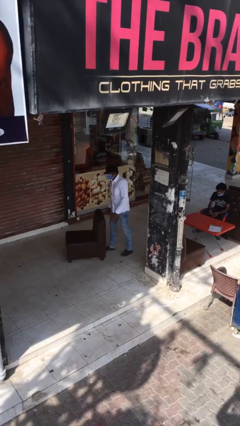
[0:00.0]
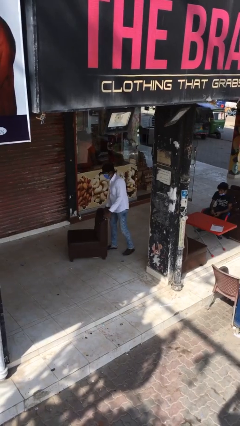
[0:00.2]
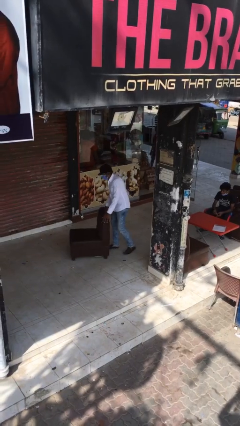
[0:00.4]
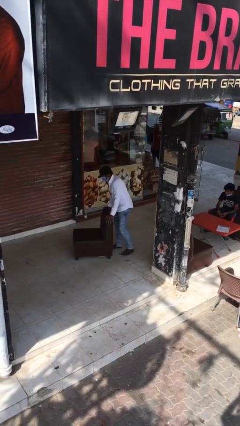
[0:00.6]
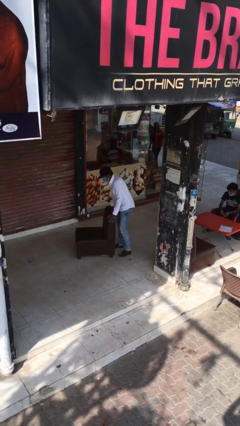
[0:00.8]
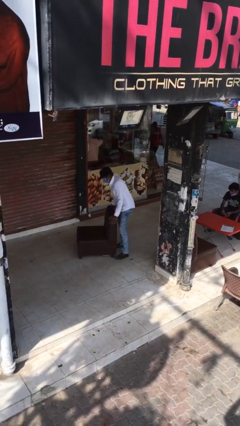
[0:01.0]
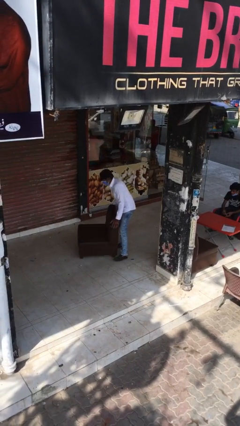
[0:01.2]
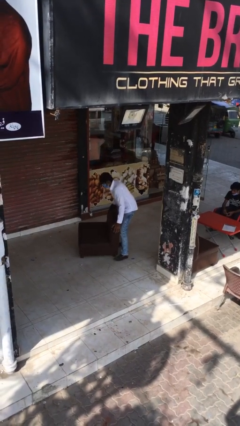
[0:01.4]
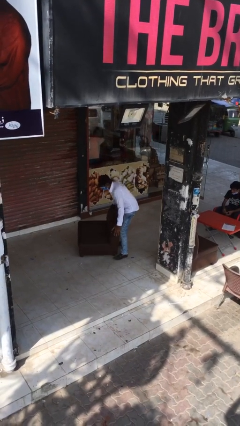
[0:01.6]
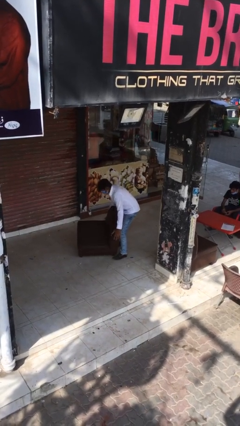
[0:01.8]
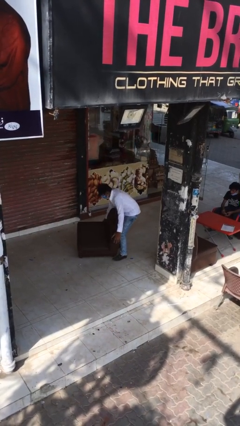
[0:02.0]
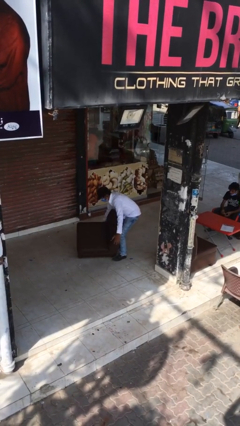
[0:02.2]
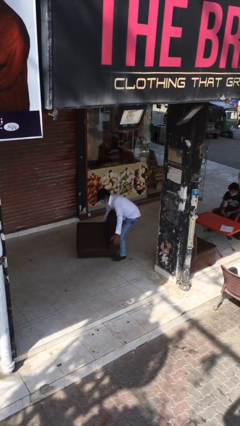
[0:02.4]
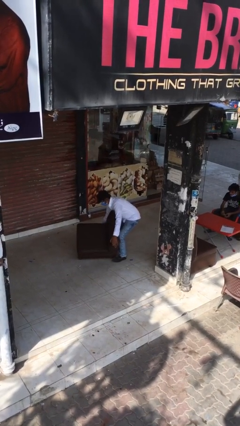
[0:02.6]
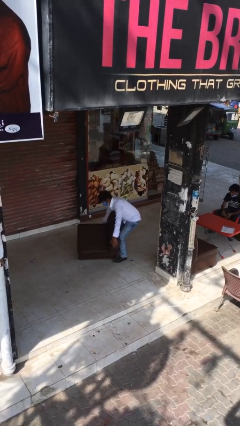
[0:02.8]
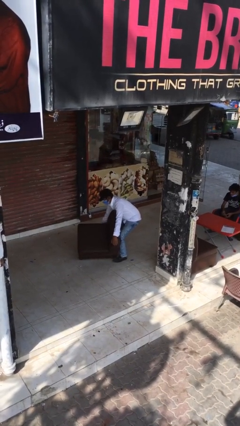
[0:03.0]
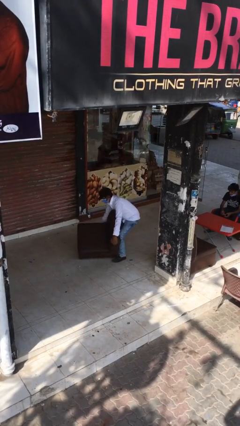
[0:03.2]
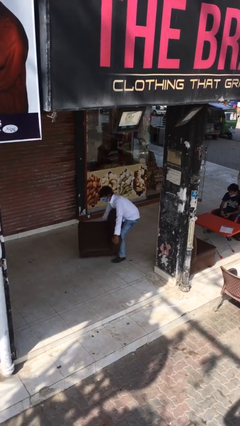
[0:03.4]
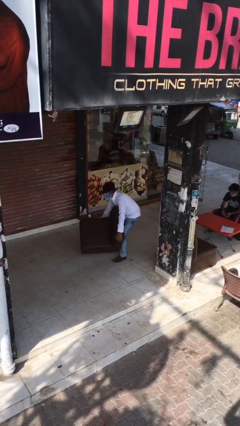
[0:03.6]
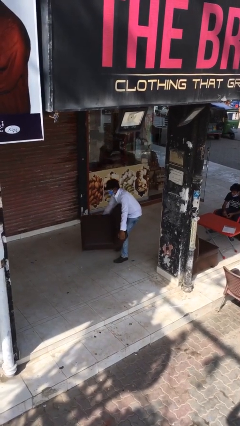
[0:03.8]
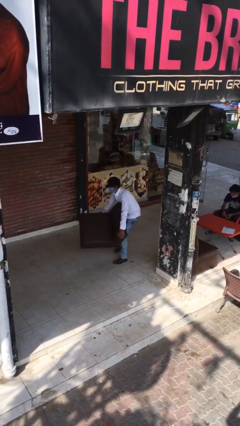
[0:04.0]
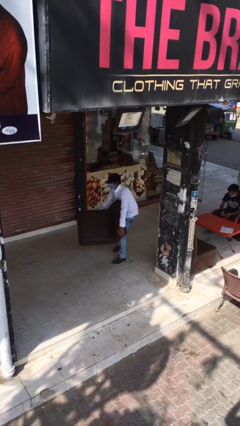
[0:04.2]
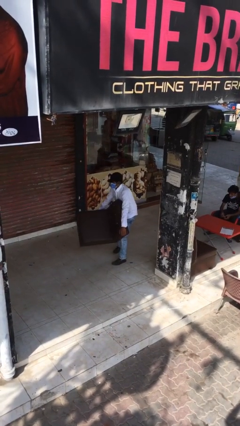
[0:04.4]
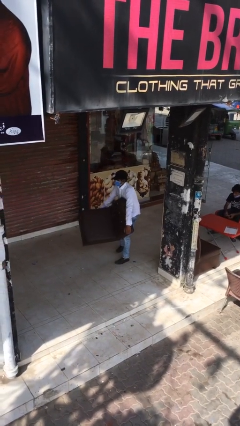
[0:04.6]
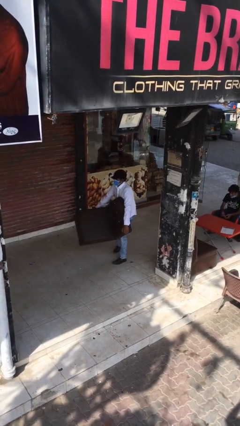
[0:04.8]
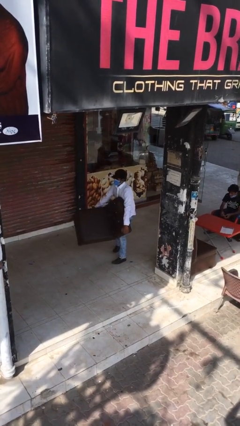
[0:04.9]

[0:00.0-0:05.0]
person picks up object from floor

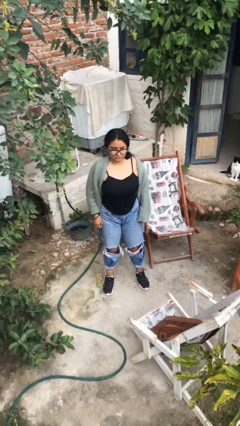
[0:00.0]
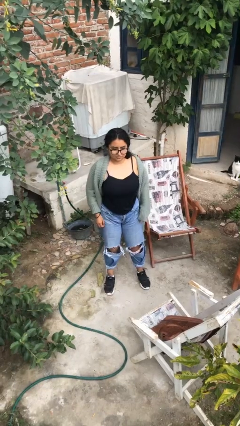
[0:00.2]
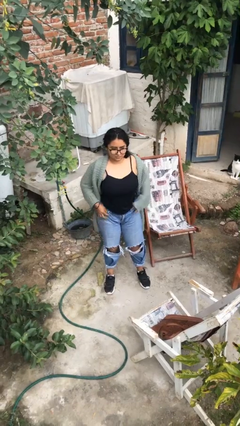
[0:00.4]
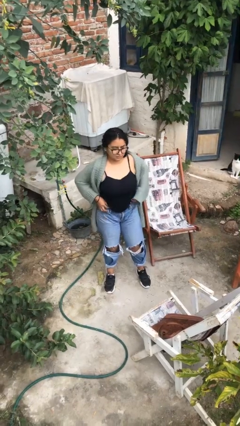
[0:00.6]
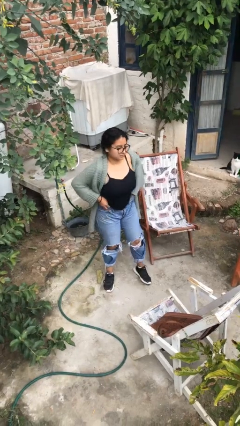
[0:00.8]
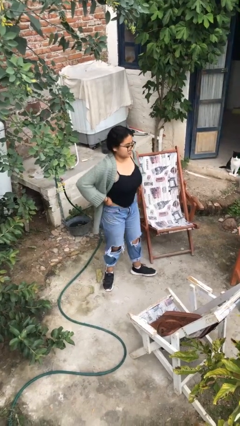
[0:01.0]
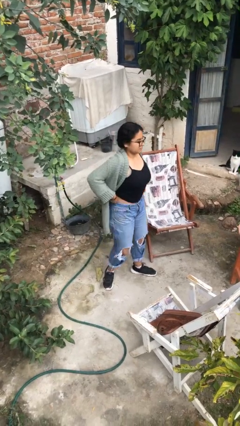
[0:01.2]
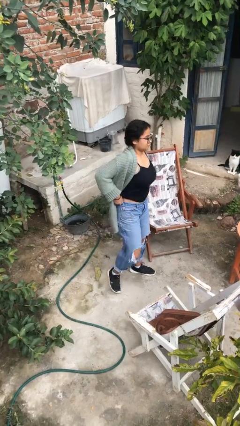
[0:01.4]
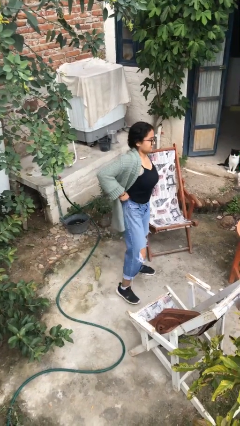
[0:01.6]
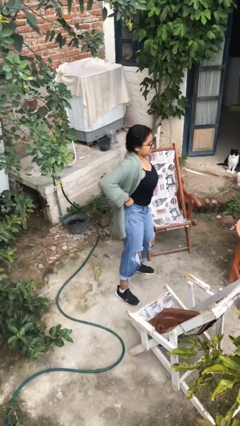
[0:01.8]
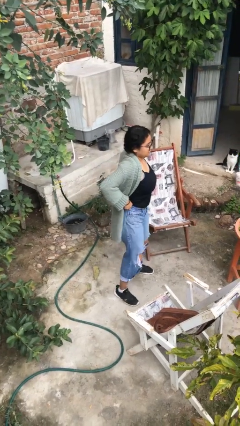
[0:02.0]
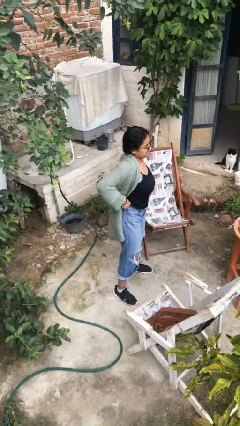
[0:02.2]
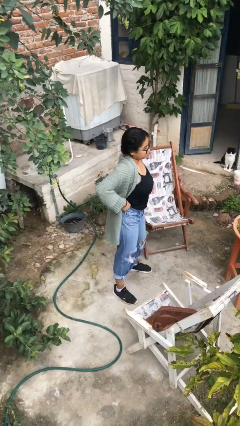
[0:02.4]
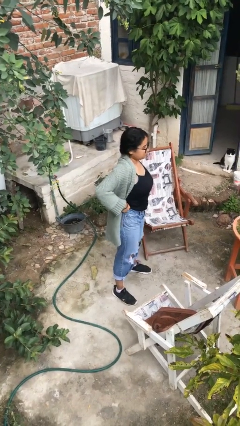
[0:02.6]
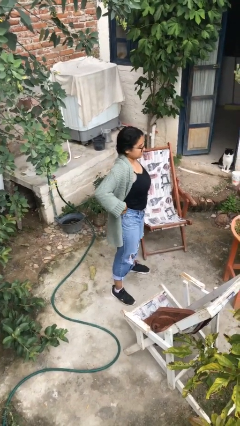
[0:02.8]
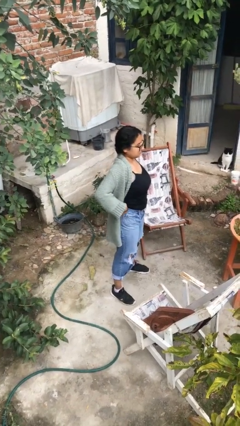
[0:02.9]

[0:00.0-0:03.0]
person hikes up pants

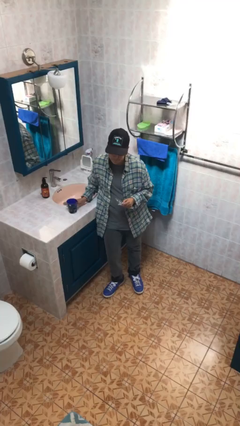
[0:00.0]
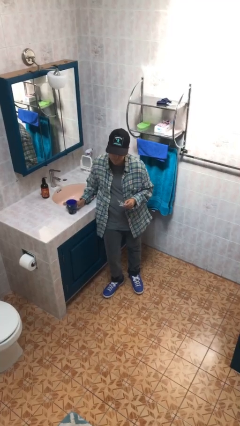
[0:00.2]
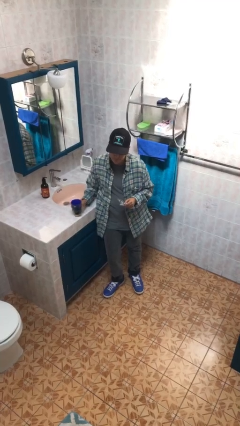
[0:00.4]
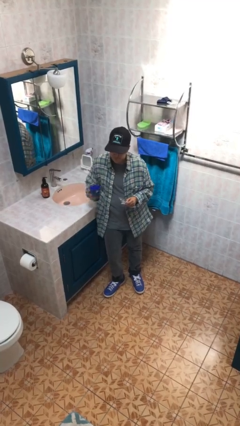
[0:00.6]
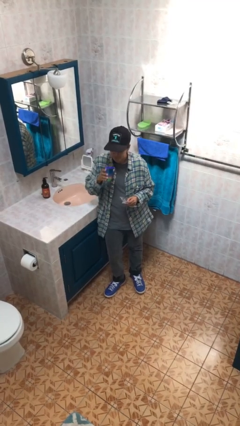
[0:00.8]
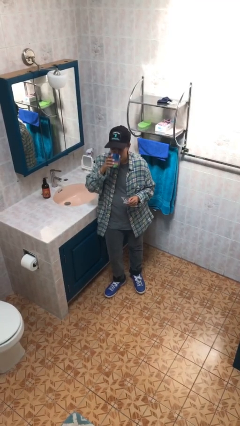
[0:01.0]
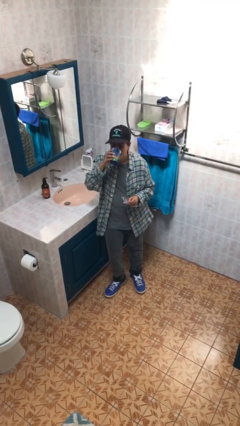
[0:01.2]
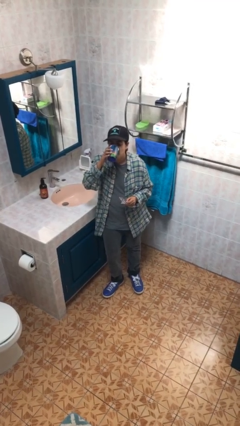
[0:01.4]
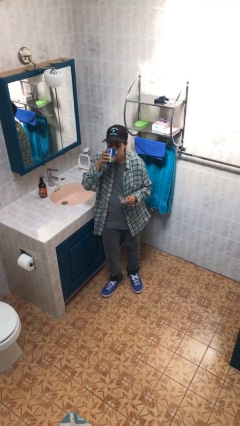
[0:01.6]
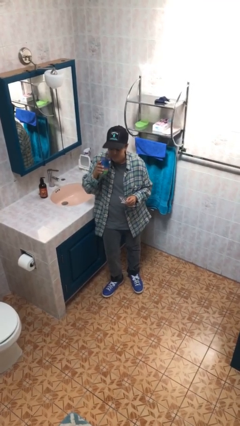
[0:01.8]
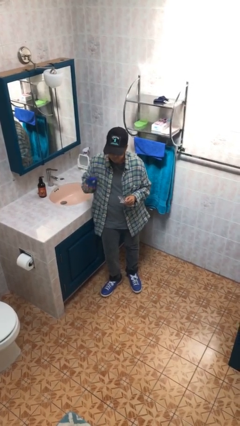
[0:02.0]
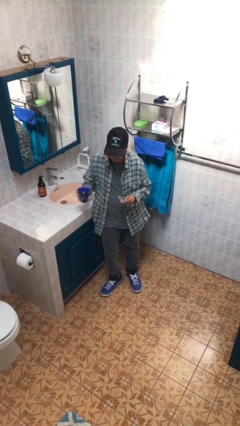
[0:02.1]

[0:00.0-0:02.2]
person drinks from cup

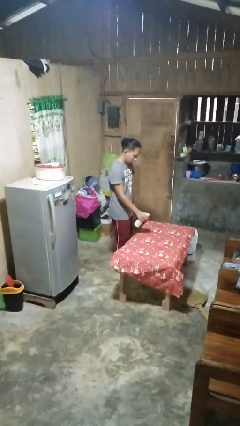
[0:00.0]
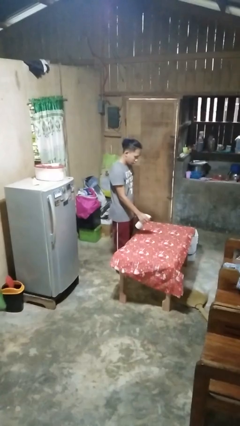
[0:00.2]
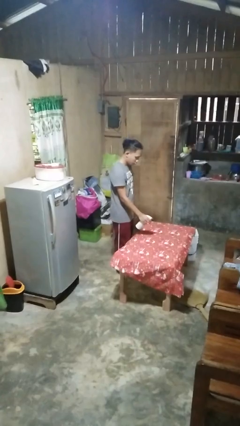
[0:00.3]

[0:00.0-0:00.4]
person sprays from bottle

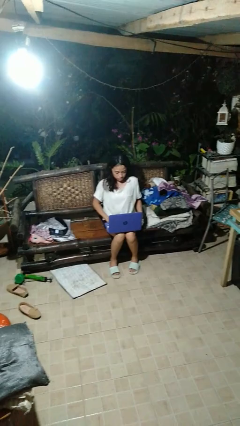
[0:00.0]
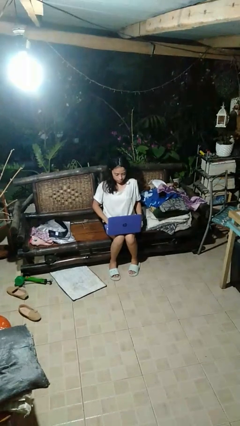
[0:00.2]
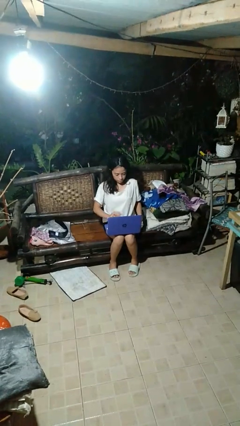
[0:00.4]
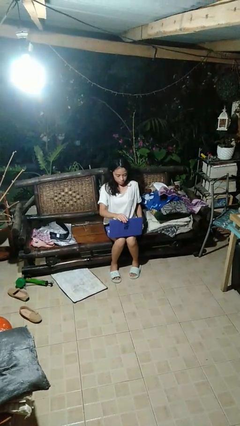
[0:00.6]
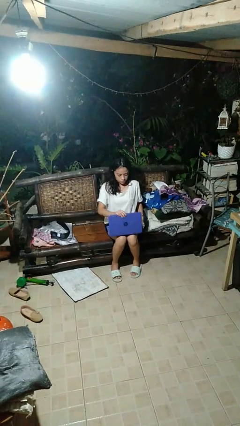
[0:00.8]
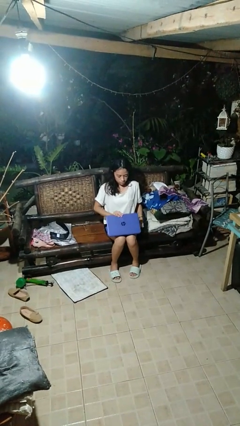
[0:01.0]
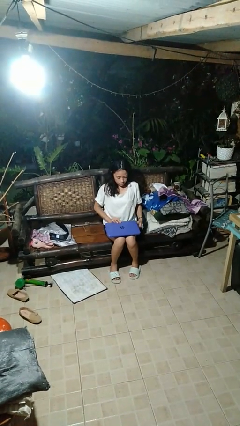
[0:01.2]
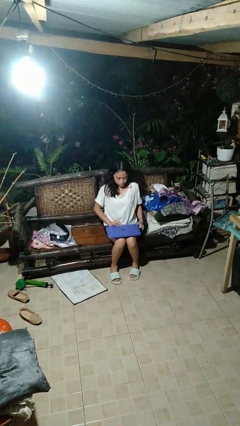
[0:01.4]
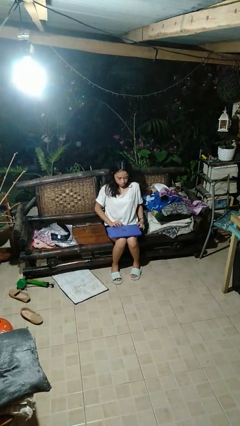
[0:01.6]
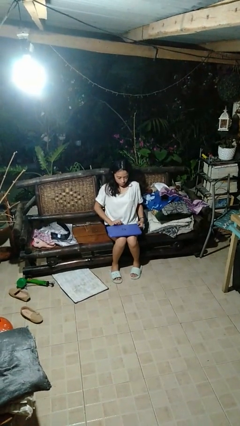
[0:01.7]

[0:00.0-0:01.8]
person closes laptop

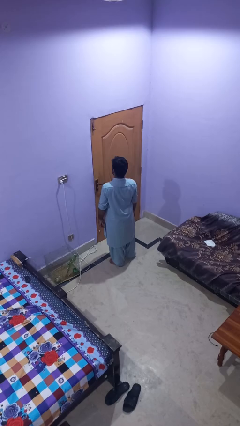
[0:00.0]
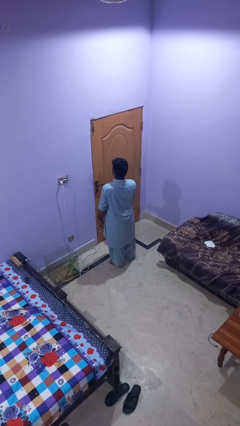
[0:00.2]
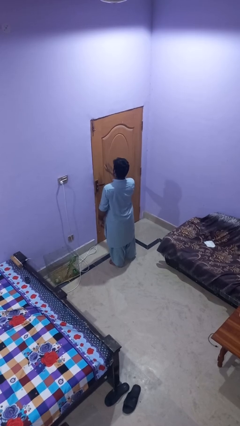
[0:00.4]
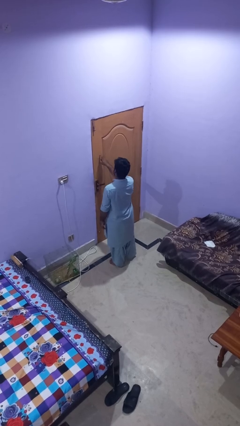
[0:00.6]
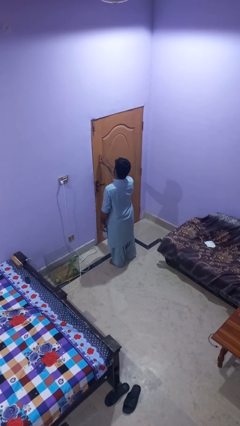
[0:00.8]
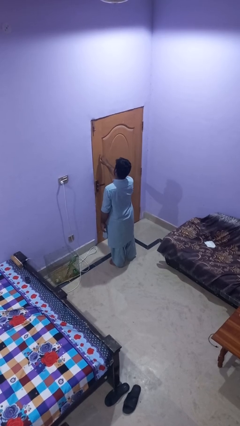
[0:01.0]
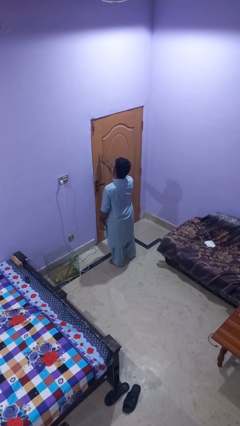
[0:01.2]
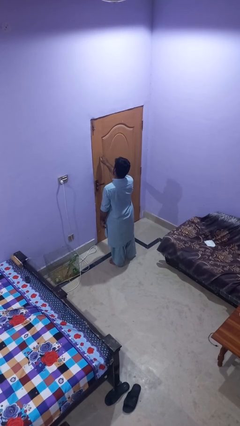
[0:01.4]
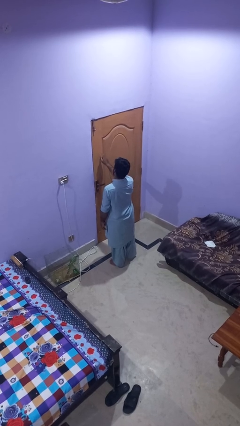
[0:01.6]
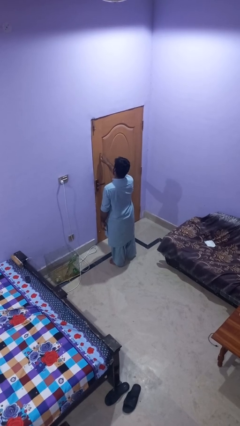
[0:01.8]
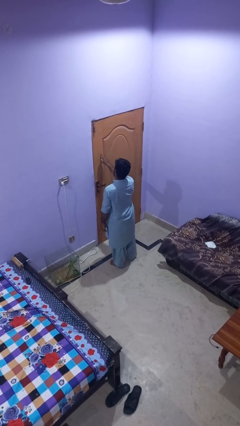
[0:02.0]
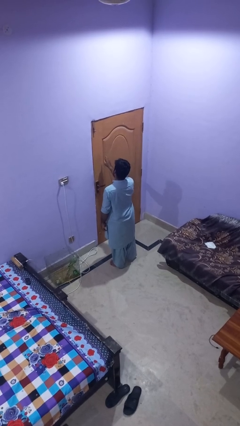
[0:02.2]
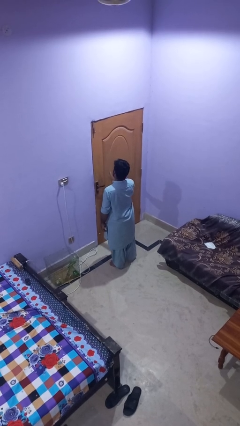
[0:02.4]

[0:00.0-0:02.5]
person taps object with finger

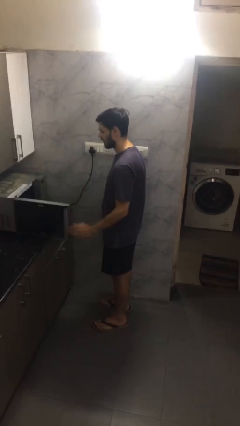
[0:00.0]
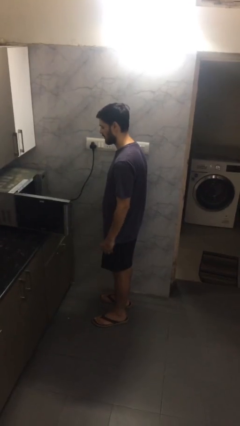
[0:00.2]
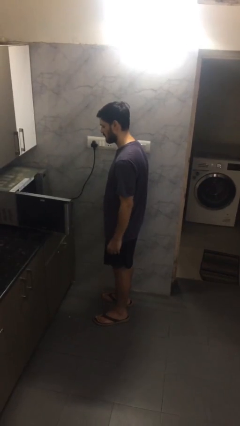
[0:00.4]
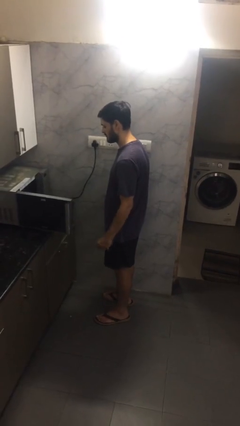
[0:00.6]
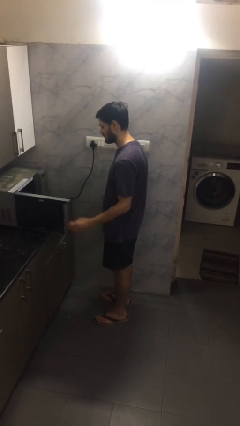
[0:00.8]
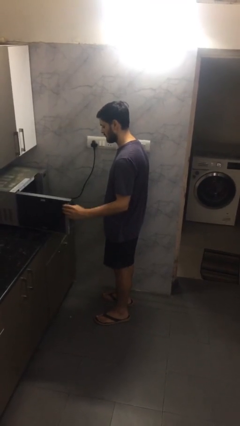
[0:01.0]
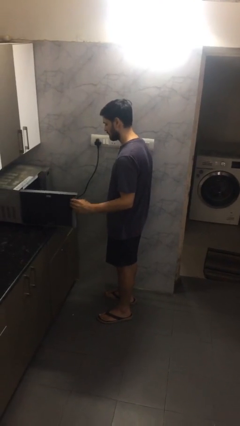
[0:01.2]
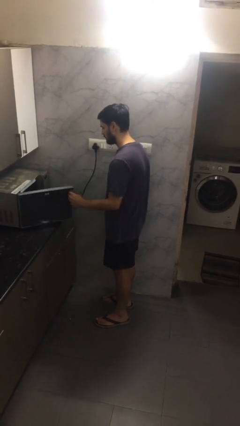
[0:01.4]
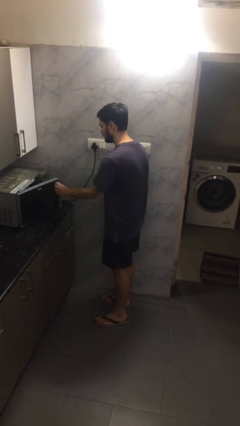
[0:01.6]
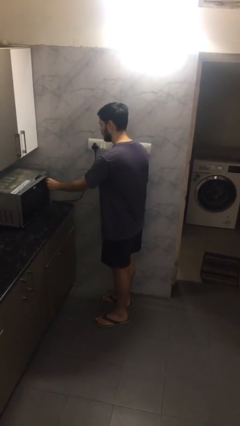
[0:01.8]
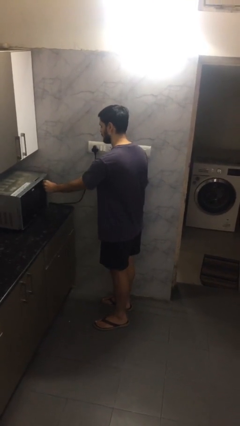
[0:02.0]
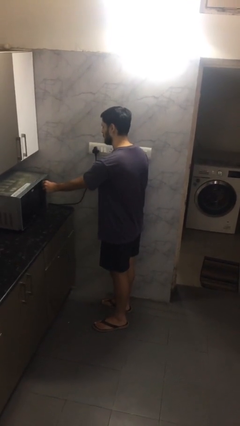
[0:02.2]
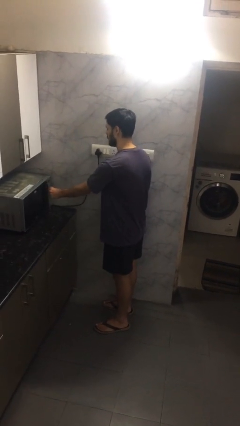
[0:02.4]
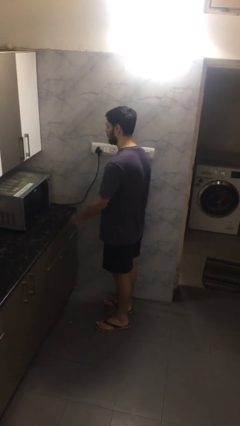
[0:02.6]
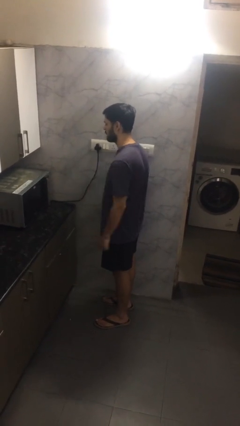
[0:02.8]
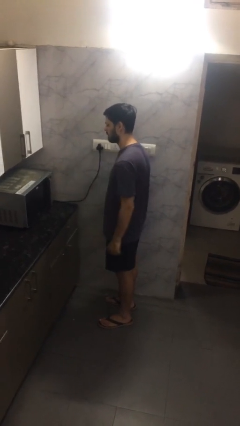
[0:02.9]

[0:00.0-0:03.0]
person closes microwave
